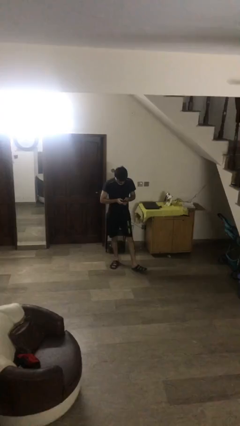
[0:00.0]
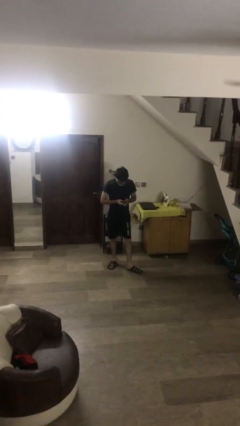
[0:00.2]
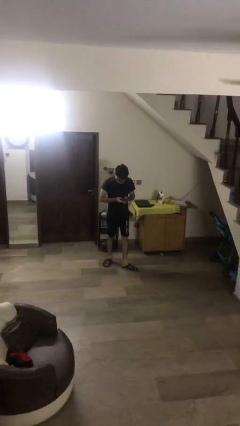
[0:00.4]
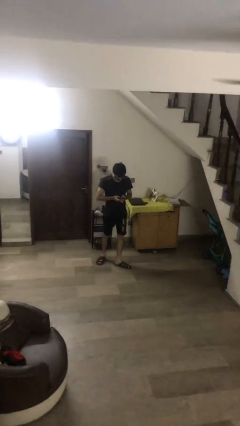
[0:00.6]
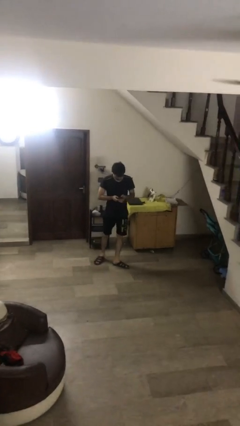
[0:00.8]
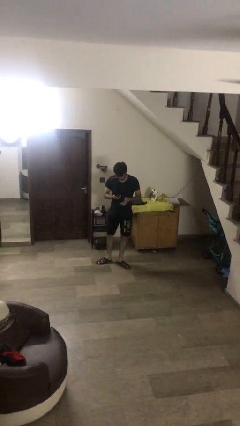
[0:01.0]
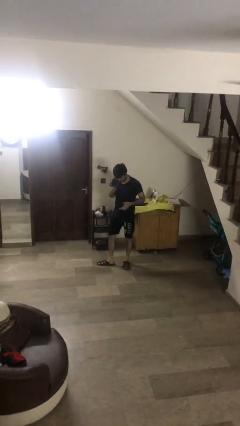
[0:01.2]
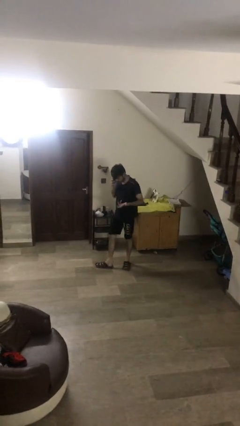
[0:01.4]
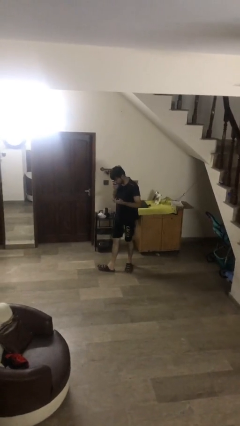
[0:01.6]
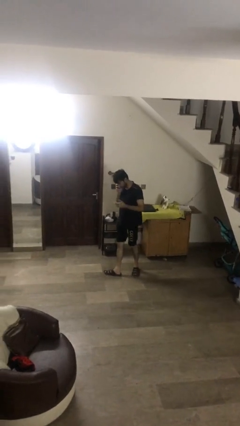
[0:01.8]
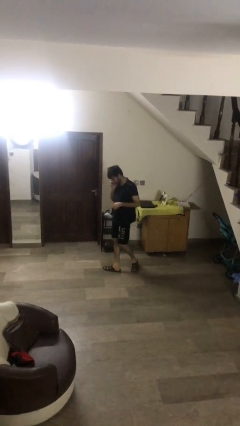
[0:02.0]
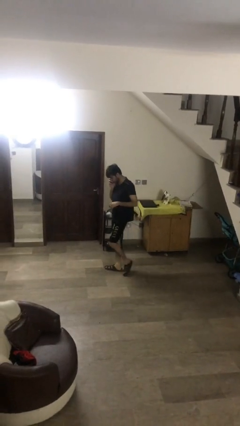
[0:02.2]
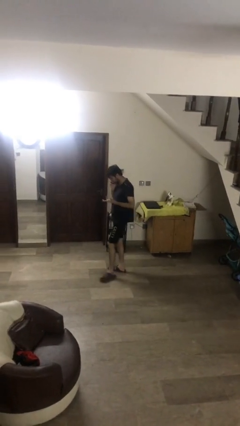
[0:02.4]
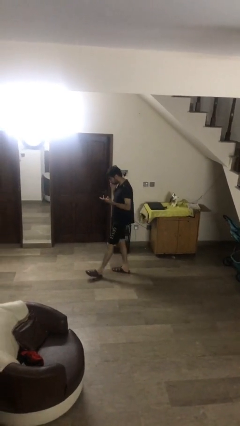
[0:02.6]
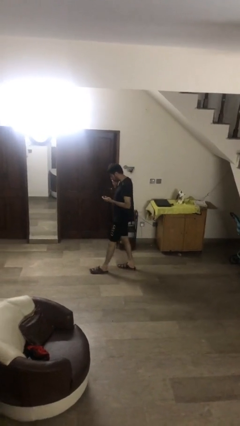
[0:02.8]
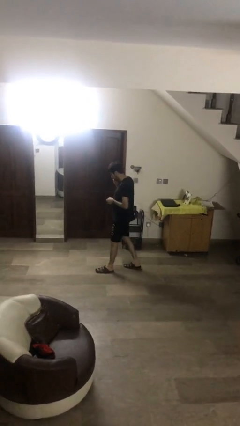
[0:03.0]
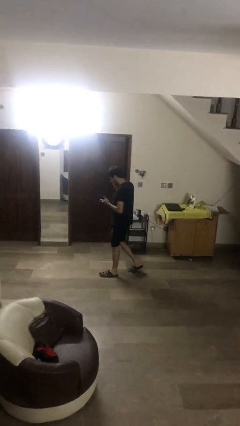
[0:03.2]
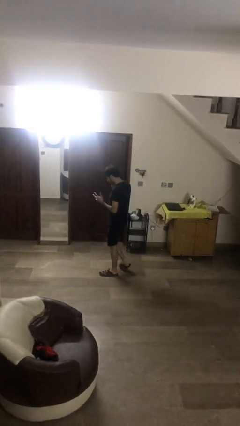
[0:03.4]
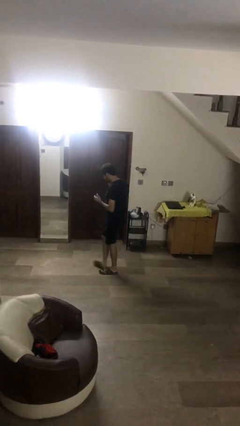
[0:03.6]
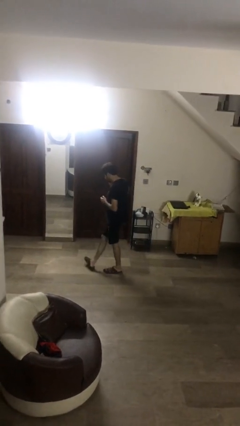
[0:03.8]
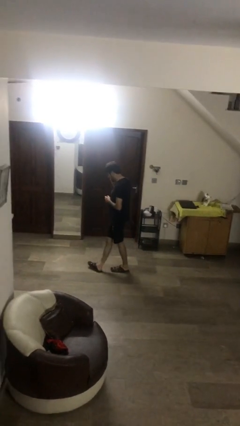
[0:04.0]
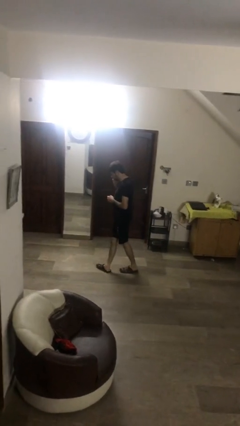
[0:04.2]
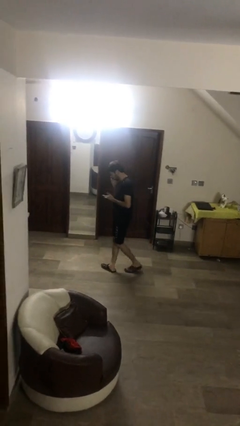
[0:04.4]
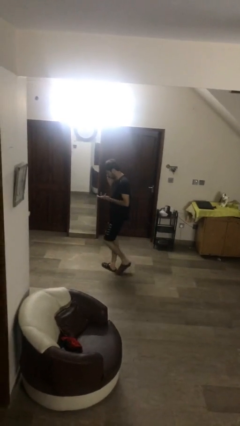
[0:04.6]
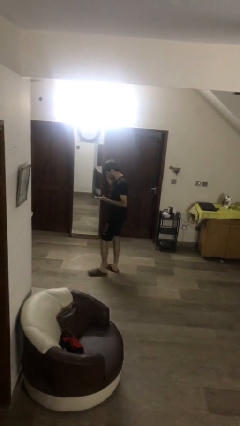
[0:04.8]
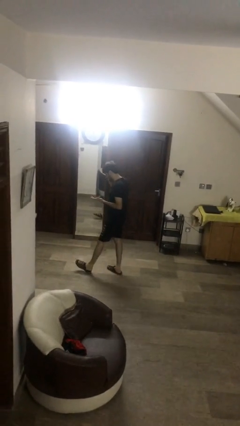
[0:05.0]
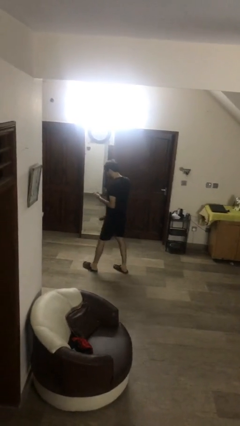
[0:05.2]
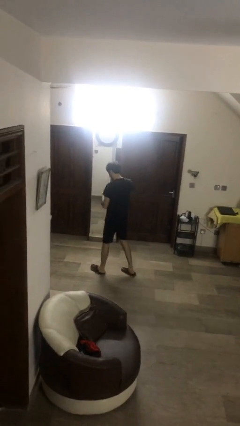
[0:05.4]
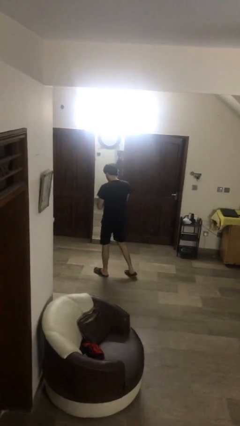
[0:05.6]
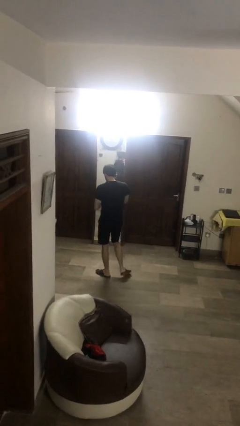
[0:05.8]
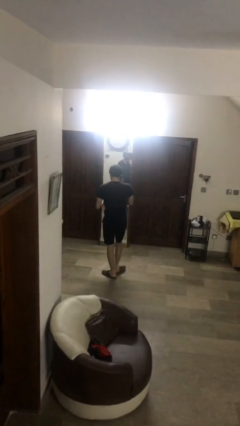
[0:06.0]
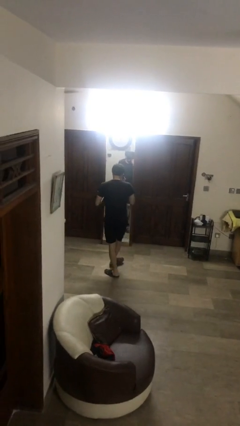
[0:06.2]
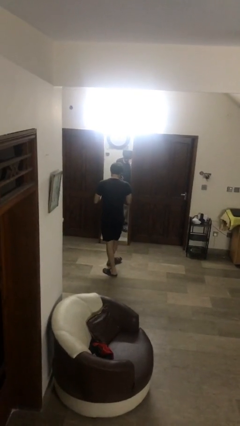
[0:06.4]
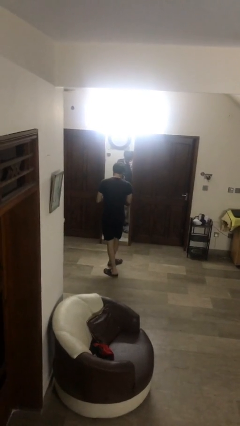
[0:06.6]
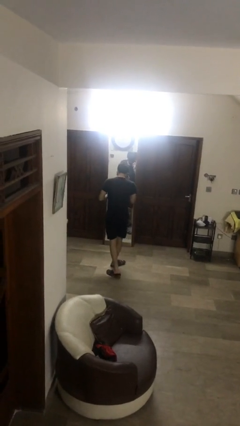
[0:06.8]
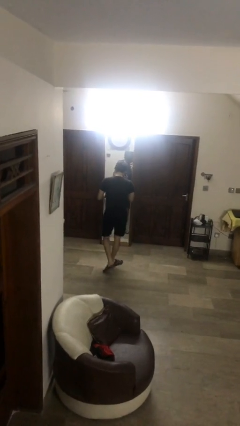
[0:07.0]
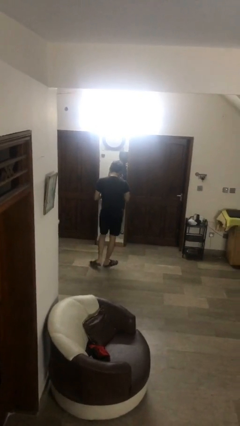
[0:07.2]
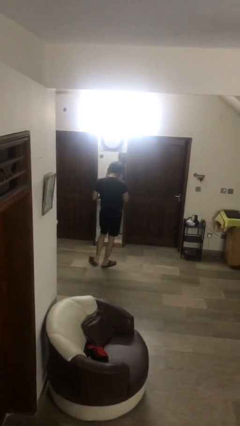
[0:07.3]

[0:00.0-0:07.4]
person talks on phone

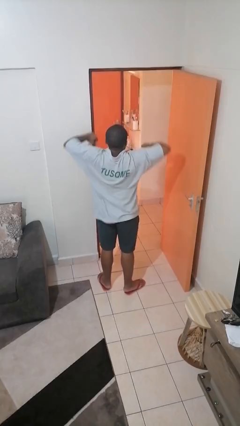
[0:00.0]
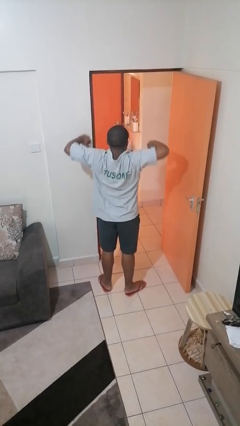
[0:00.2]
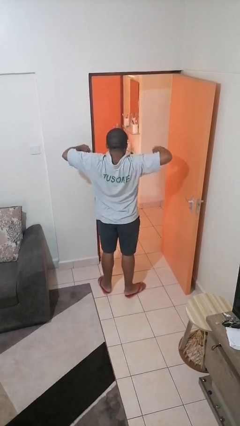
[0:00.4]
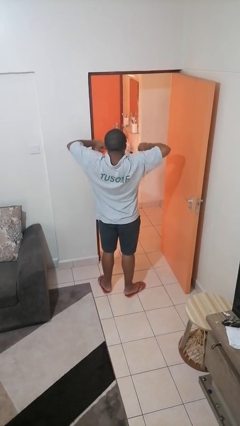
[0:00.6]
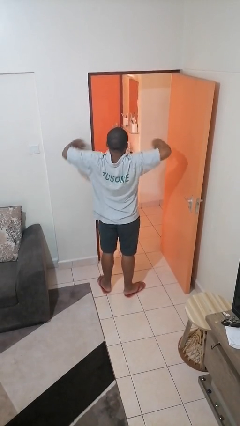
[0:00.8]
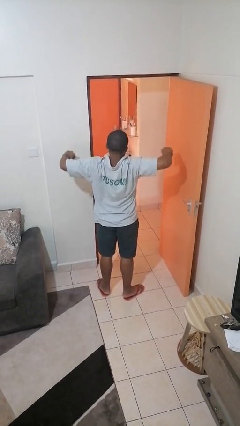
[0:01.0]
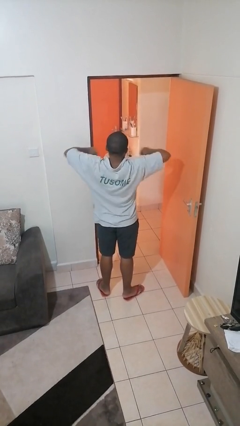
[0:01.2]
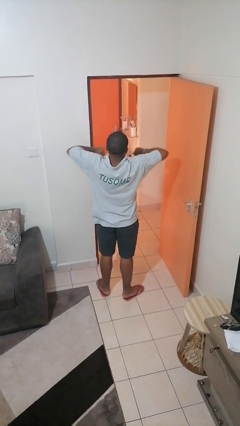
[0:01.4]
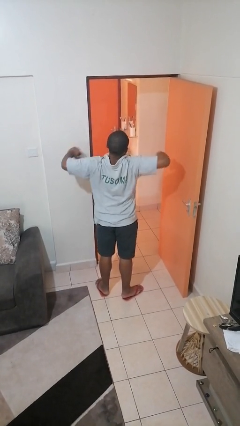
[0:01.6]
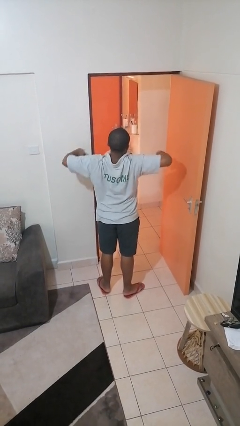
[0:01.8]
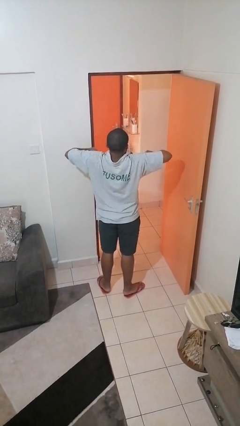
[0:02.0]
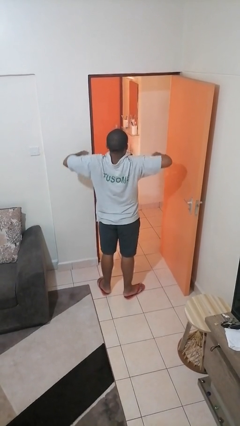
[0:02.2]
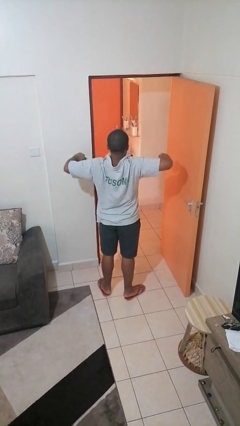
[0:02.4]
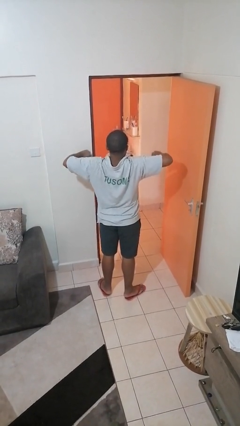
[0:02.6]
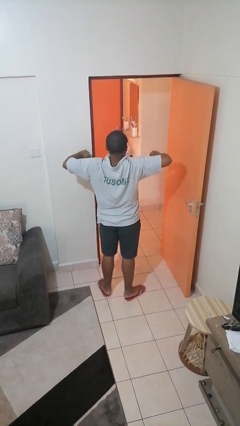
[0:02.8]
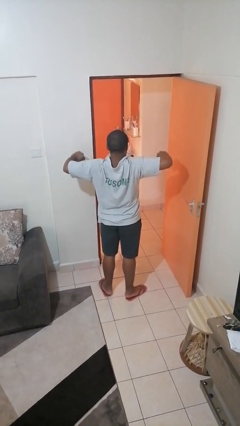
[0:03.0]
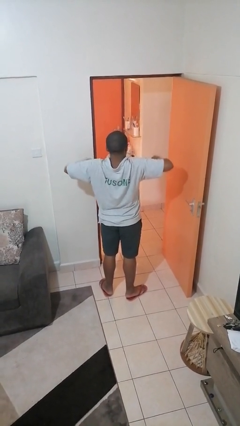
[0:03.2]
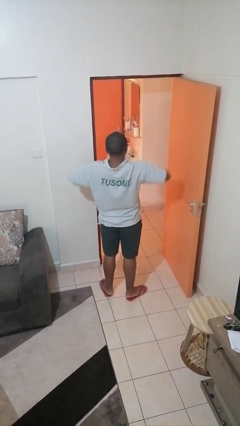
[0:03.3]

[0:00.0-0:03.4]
person stretches arms to side

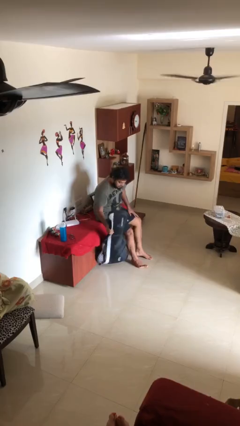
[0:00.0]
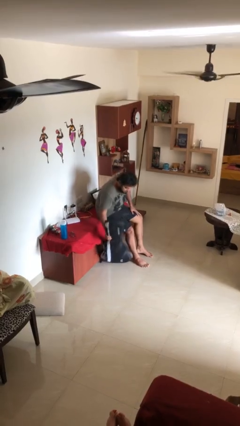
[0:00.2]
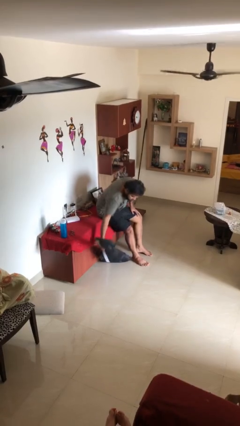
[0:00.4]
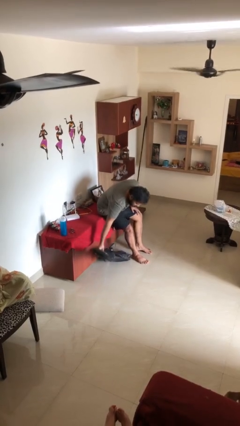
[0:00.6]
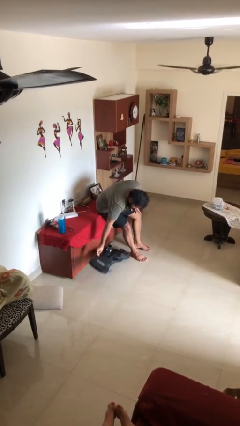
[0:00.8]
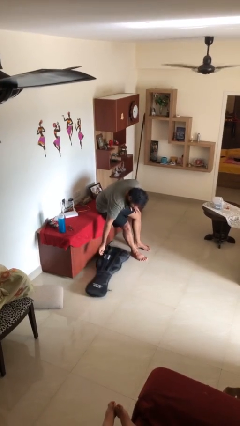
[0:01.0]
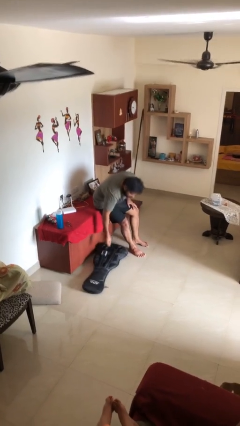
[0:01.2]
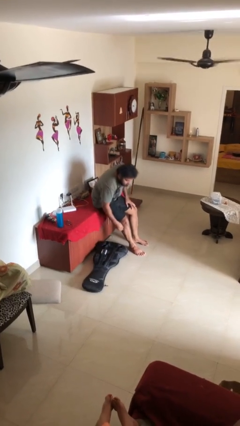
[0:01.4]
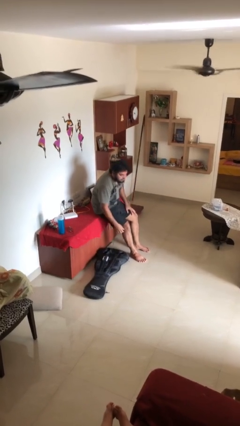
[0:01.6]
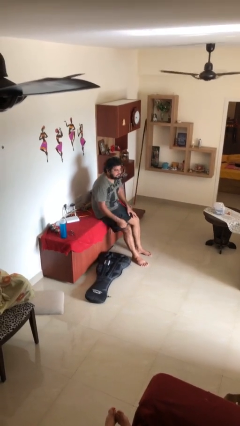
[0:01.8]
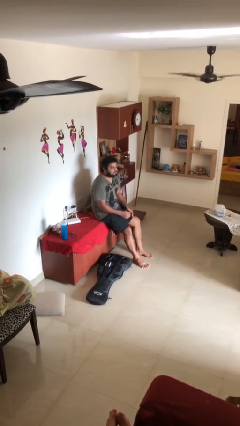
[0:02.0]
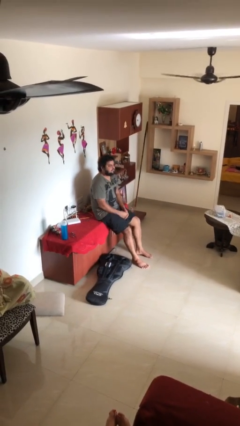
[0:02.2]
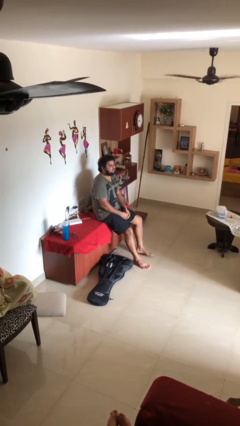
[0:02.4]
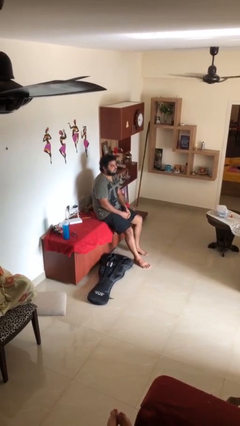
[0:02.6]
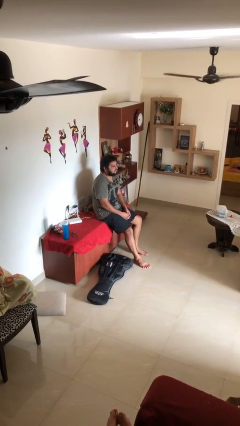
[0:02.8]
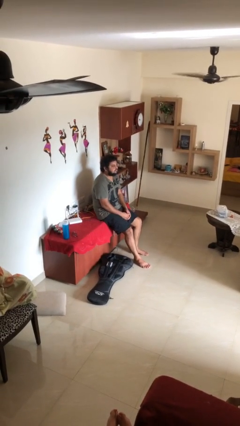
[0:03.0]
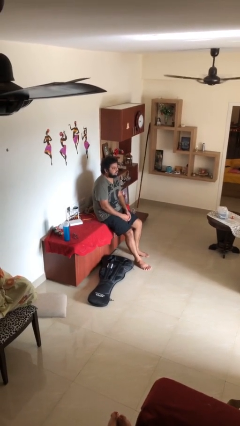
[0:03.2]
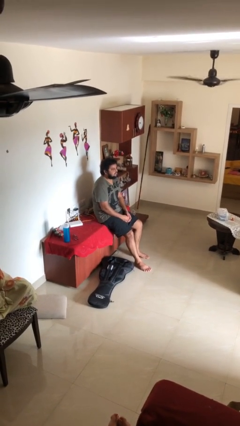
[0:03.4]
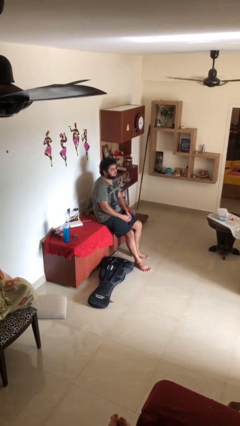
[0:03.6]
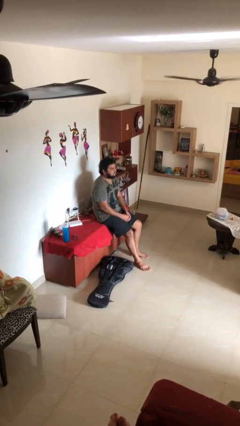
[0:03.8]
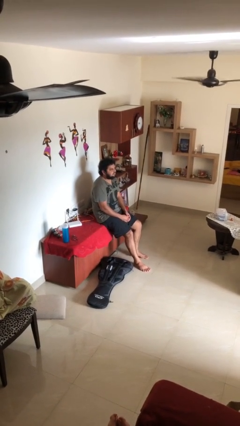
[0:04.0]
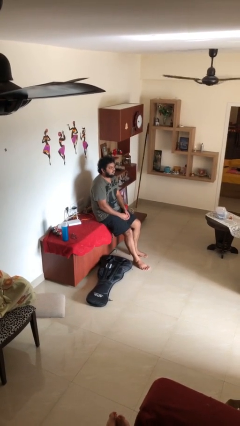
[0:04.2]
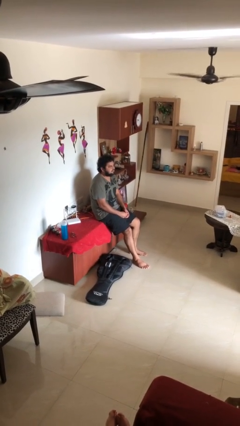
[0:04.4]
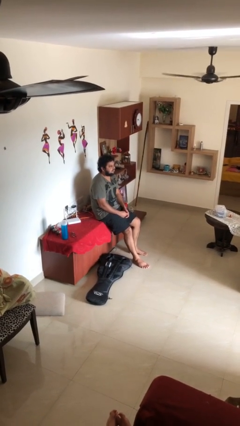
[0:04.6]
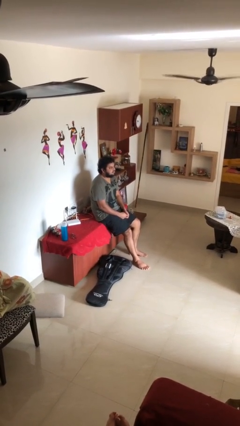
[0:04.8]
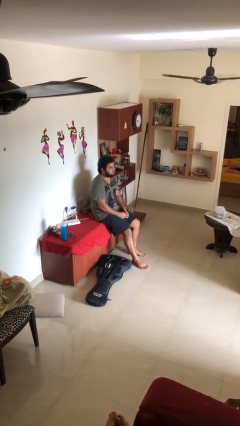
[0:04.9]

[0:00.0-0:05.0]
person puts down object on floor

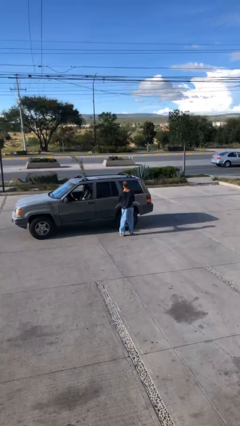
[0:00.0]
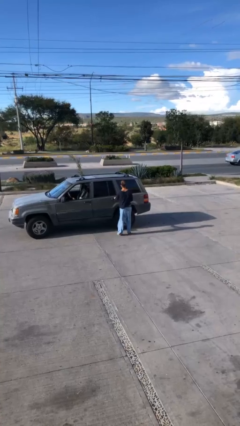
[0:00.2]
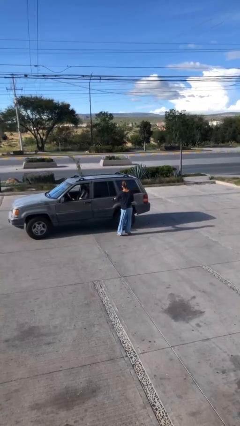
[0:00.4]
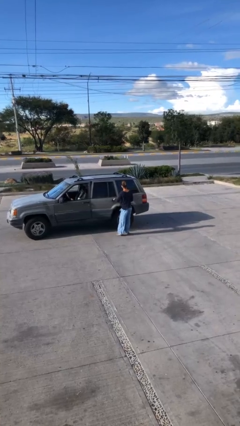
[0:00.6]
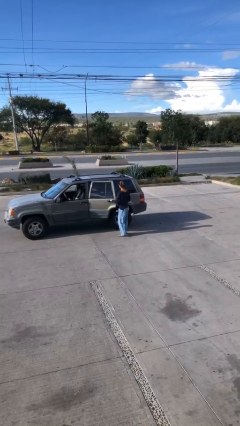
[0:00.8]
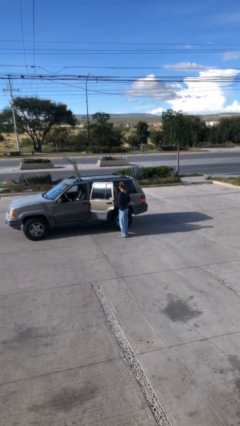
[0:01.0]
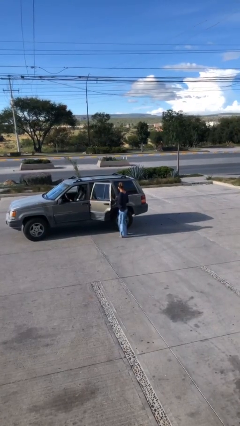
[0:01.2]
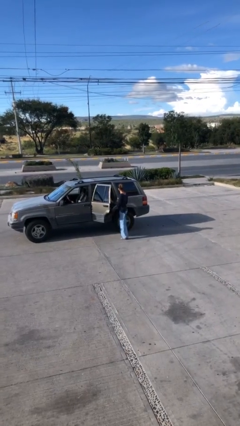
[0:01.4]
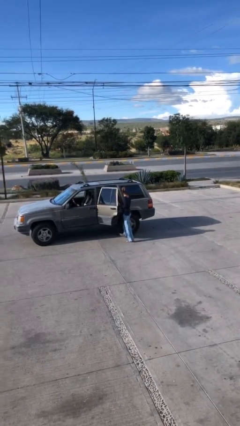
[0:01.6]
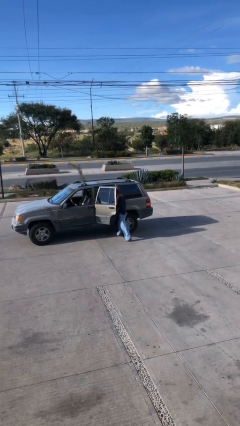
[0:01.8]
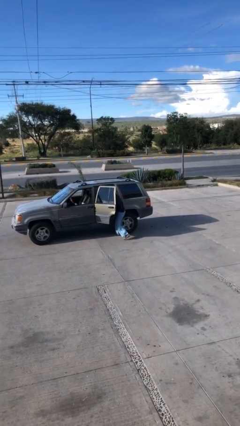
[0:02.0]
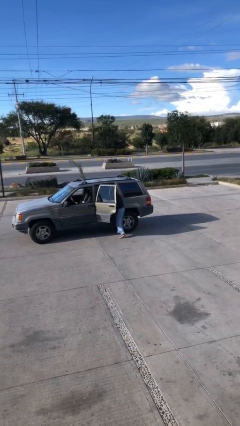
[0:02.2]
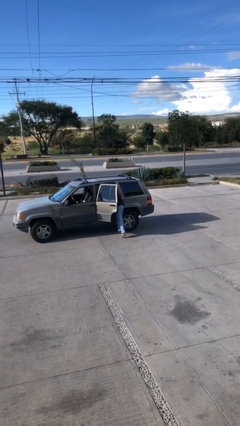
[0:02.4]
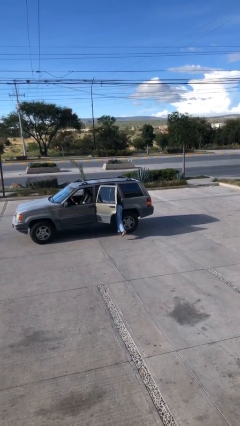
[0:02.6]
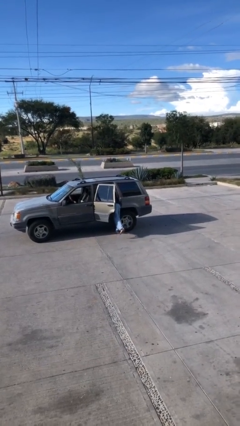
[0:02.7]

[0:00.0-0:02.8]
person opens car door
